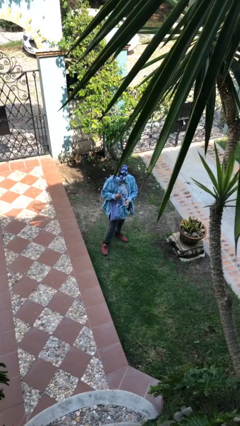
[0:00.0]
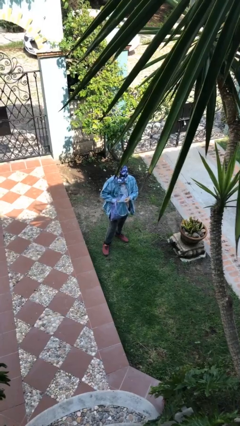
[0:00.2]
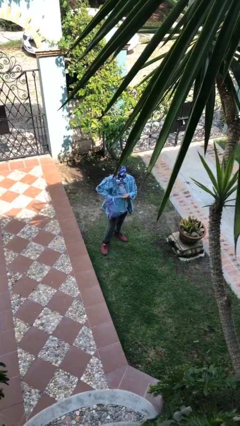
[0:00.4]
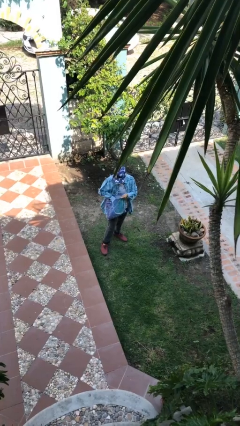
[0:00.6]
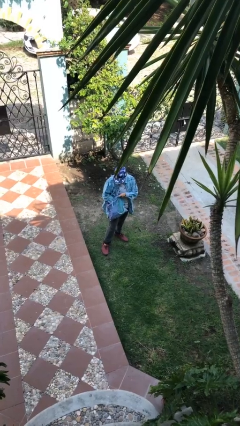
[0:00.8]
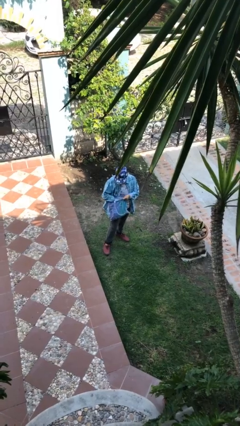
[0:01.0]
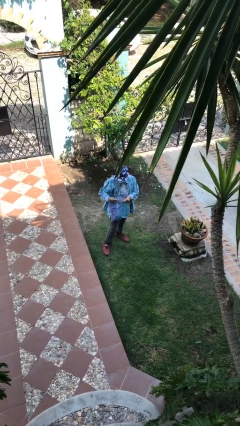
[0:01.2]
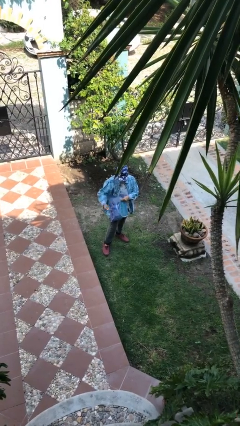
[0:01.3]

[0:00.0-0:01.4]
person puts object into purse

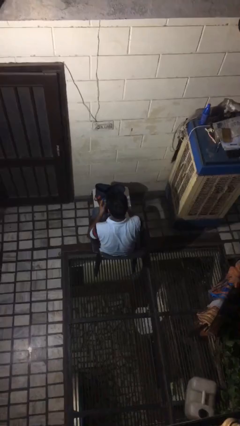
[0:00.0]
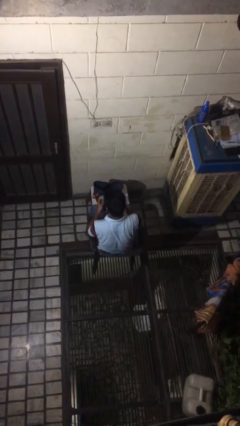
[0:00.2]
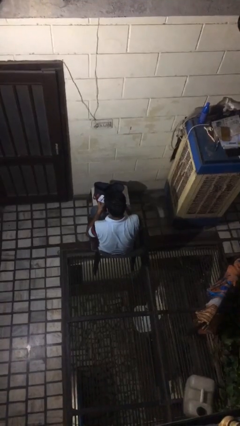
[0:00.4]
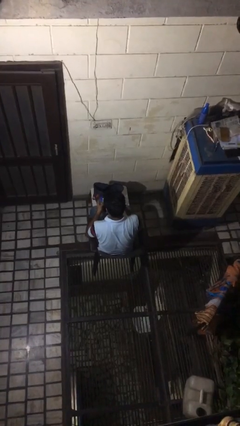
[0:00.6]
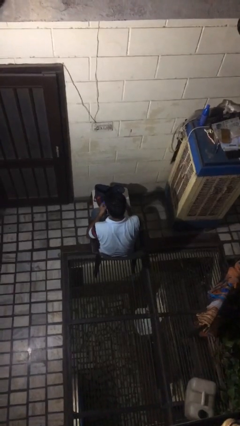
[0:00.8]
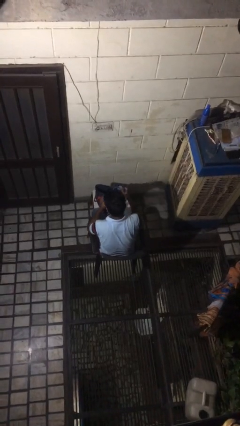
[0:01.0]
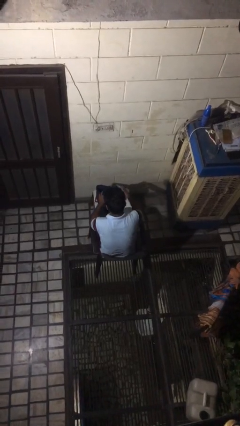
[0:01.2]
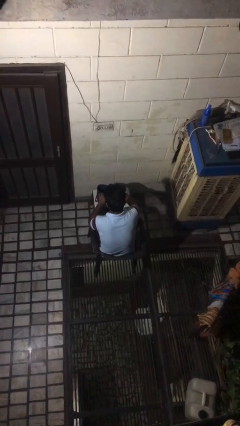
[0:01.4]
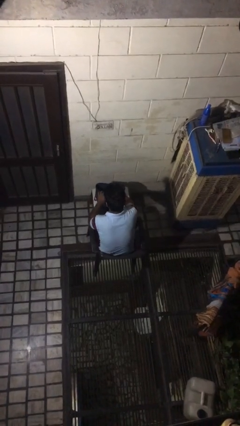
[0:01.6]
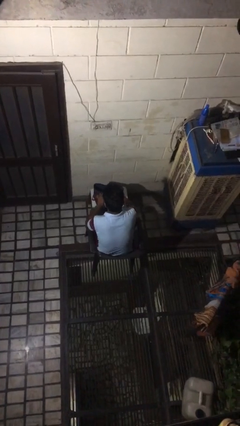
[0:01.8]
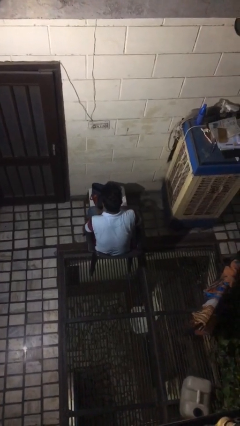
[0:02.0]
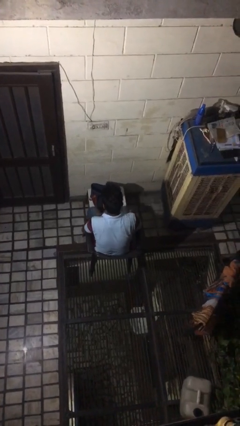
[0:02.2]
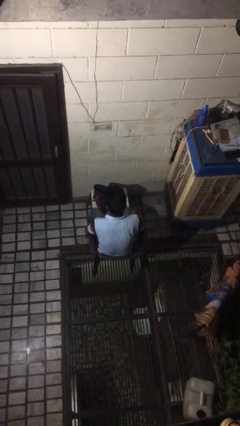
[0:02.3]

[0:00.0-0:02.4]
person puts object into bag

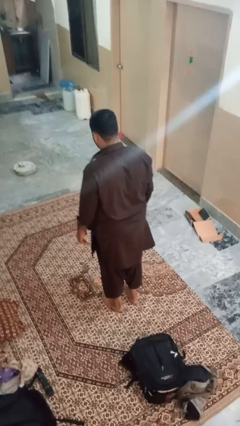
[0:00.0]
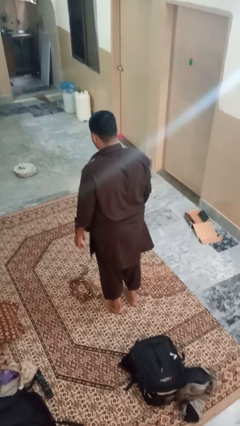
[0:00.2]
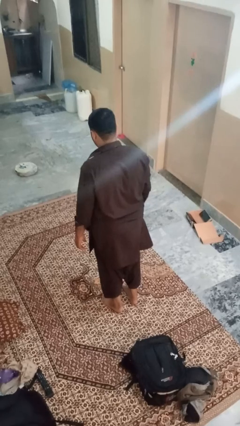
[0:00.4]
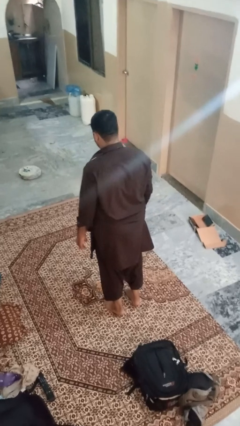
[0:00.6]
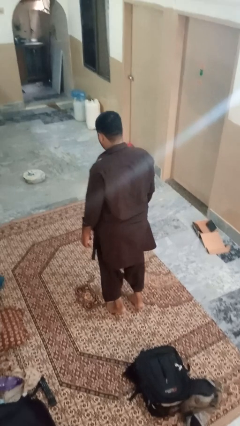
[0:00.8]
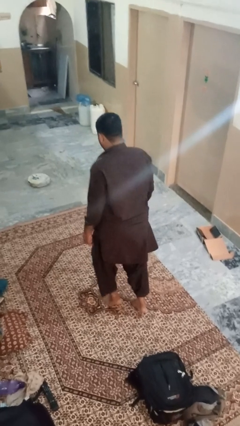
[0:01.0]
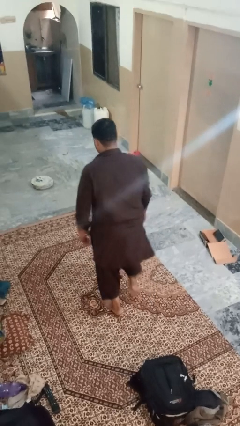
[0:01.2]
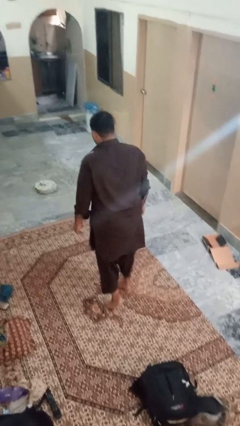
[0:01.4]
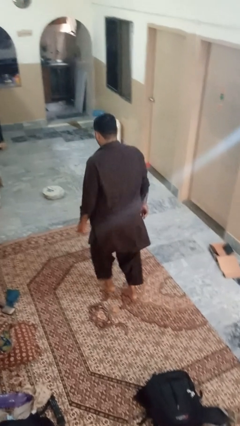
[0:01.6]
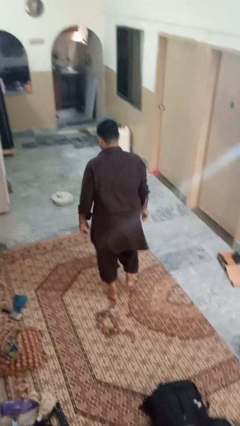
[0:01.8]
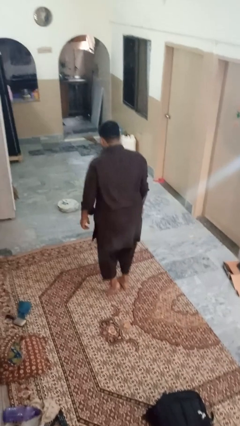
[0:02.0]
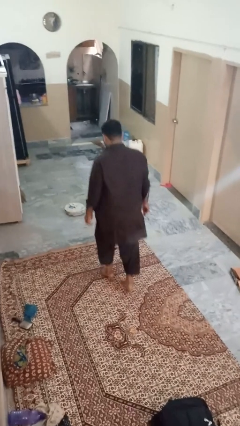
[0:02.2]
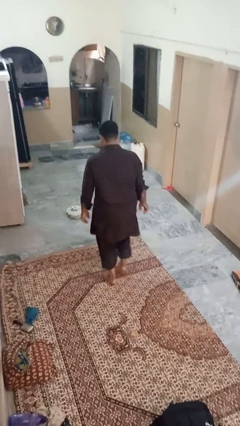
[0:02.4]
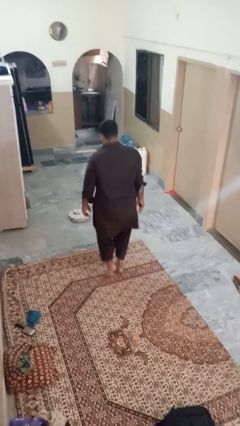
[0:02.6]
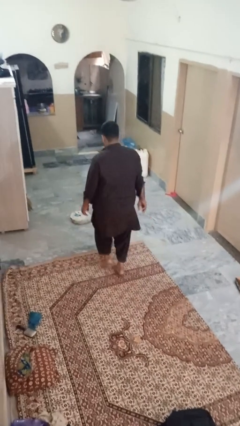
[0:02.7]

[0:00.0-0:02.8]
person walks tiptoe

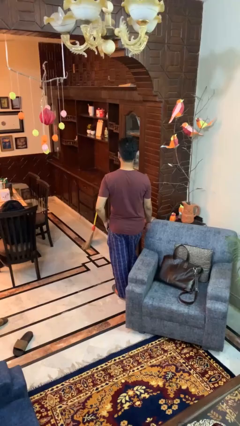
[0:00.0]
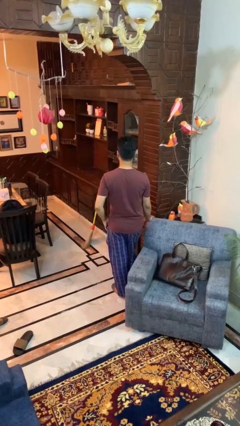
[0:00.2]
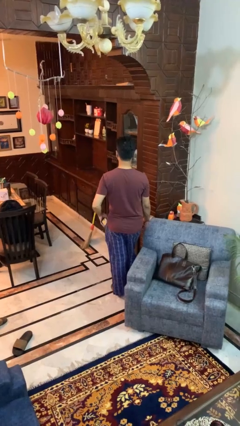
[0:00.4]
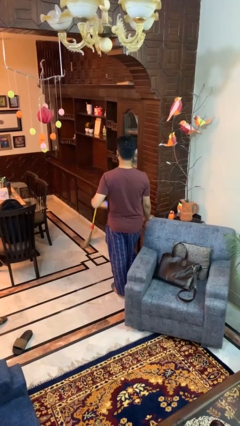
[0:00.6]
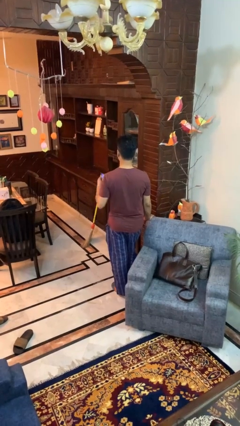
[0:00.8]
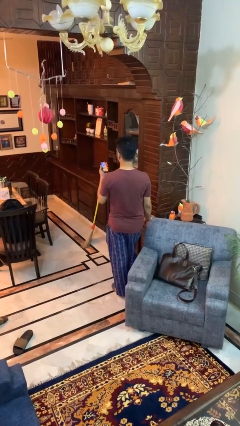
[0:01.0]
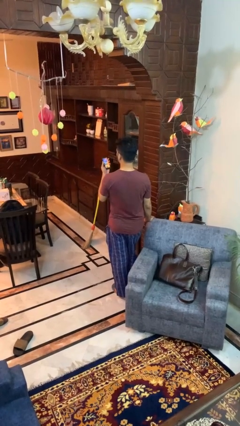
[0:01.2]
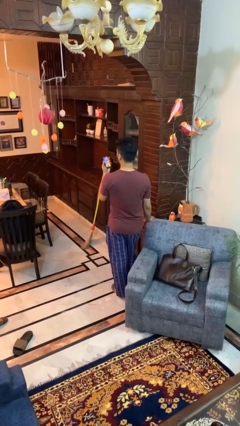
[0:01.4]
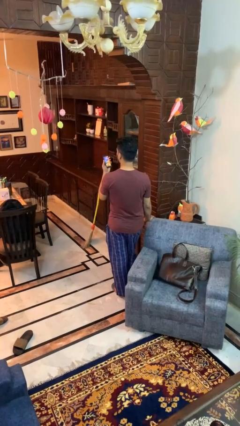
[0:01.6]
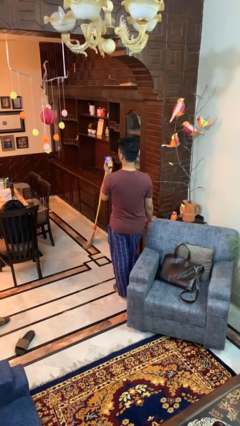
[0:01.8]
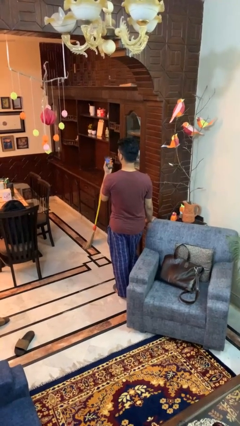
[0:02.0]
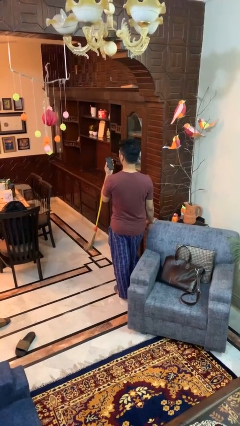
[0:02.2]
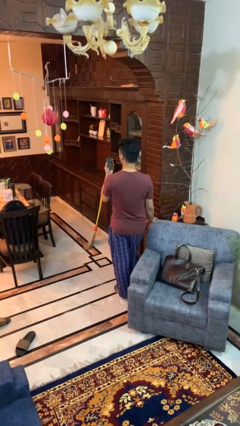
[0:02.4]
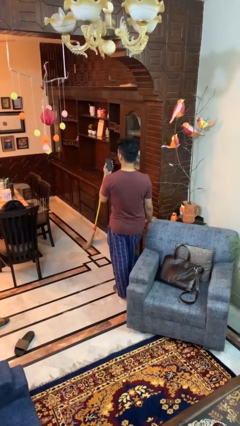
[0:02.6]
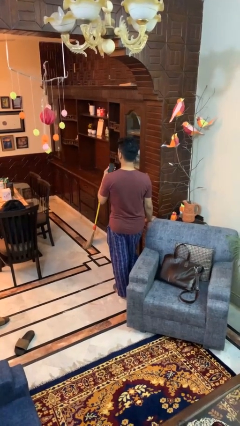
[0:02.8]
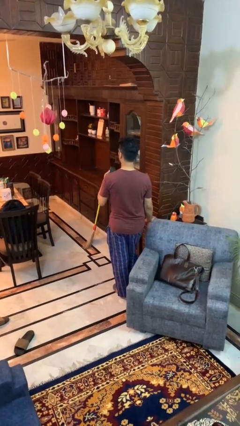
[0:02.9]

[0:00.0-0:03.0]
person takes phone from pocket

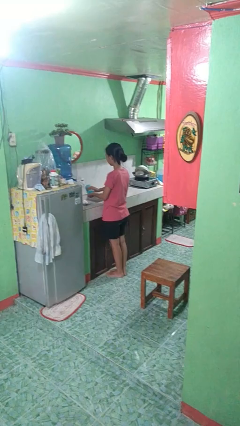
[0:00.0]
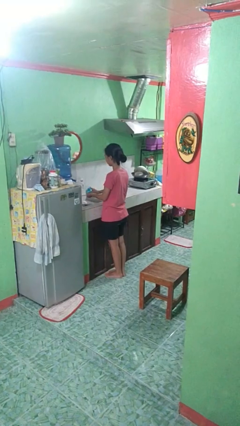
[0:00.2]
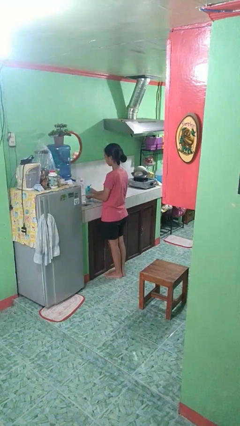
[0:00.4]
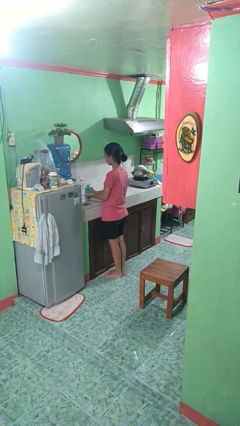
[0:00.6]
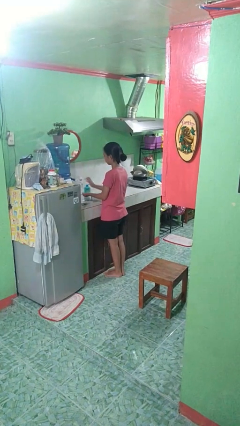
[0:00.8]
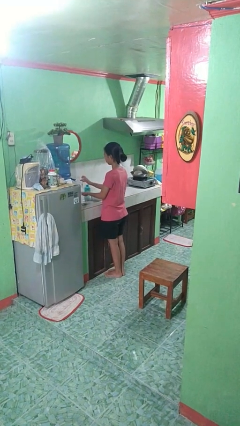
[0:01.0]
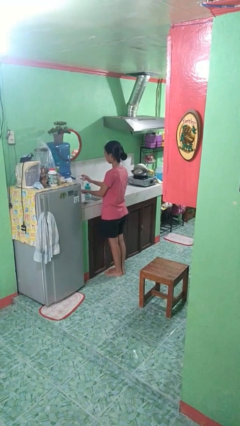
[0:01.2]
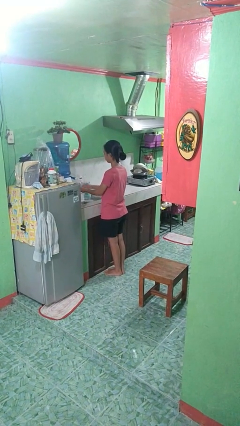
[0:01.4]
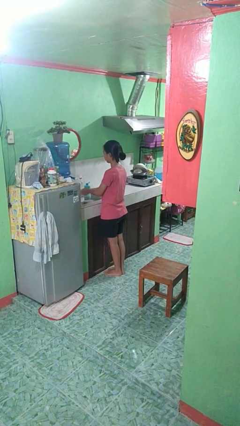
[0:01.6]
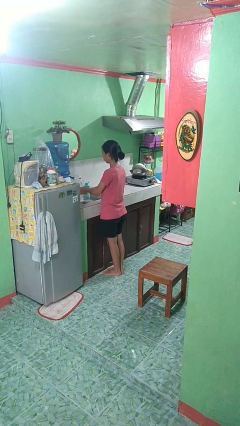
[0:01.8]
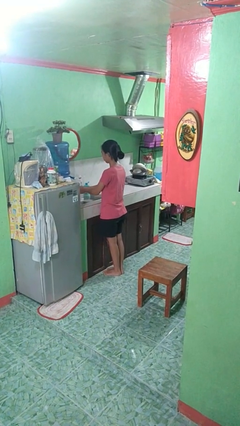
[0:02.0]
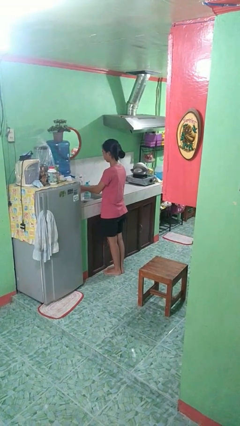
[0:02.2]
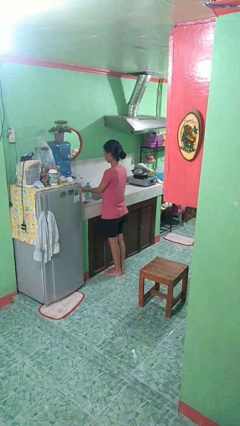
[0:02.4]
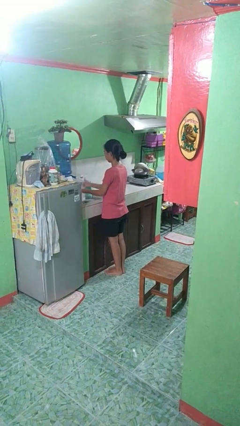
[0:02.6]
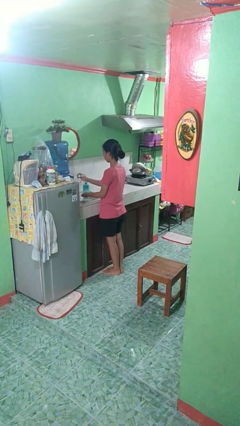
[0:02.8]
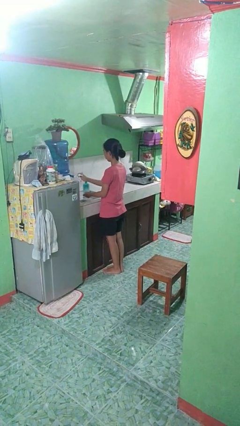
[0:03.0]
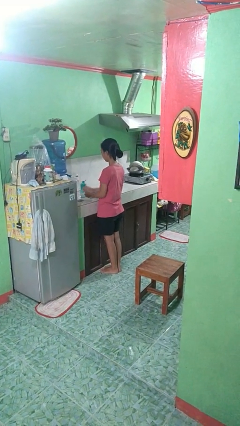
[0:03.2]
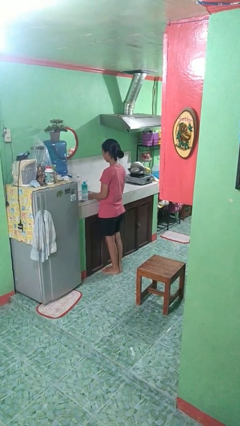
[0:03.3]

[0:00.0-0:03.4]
person washes hands

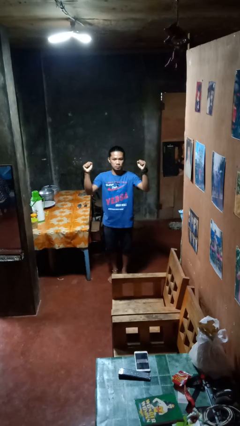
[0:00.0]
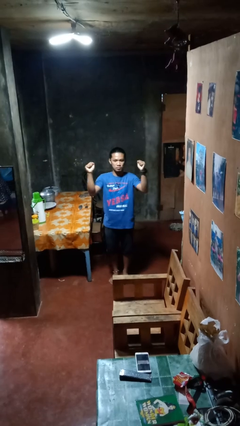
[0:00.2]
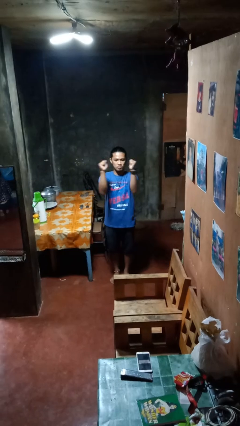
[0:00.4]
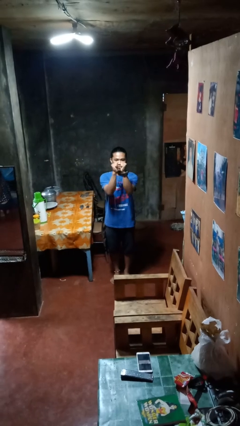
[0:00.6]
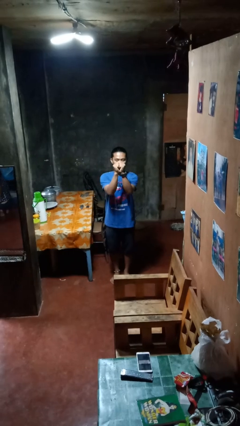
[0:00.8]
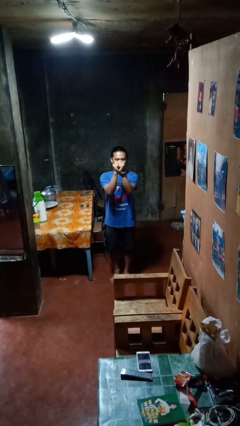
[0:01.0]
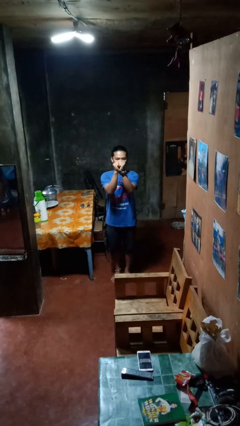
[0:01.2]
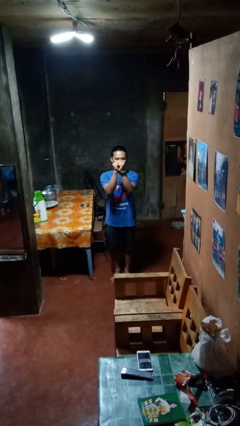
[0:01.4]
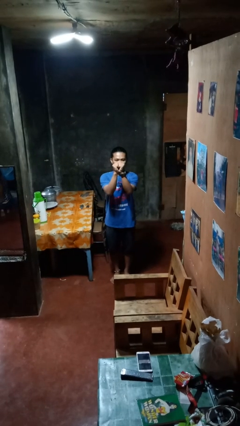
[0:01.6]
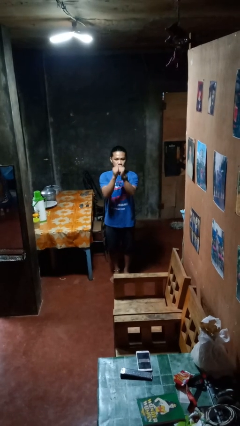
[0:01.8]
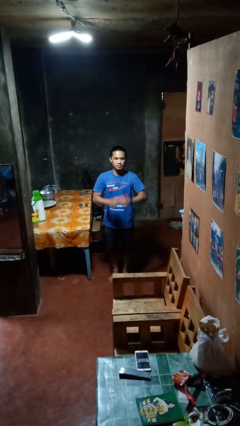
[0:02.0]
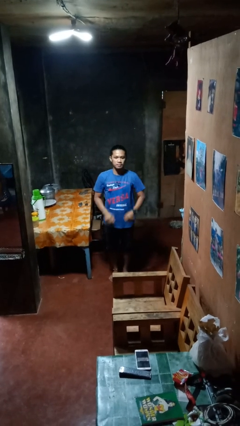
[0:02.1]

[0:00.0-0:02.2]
person gestures zoom out

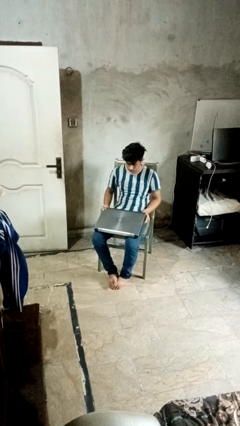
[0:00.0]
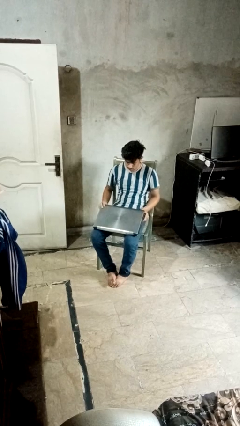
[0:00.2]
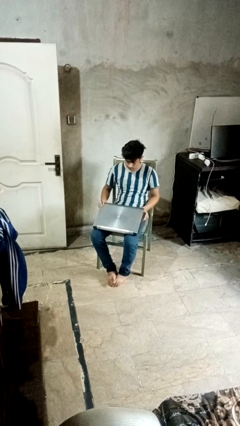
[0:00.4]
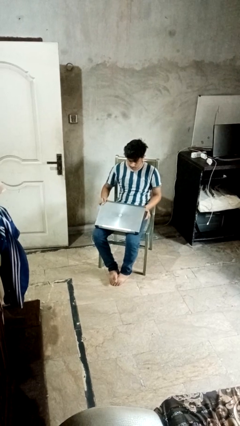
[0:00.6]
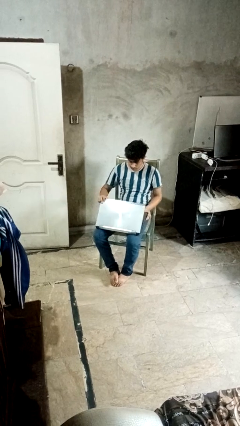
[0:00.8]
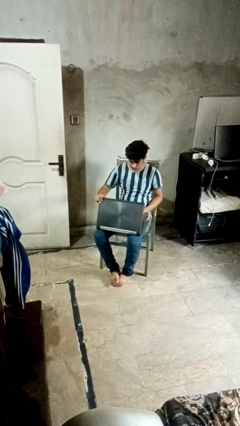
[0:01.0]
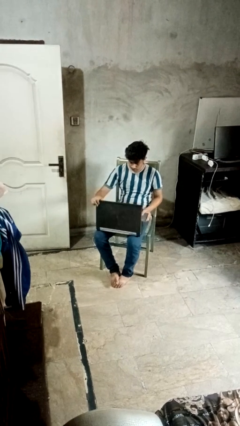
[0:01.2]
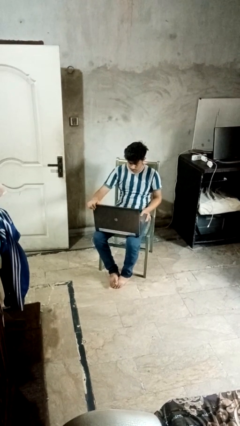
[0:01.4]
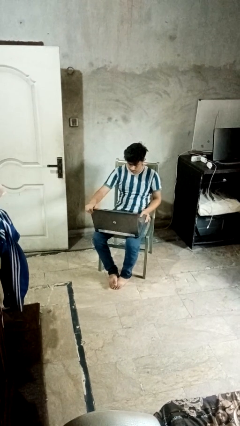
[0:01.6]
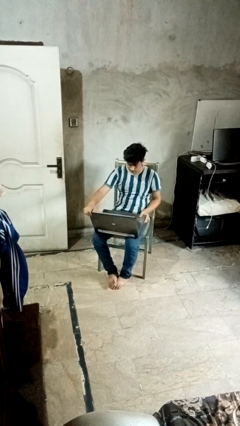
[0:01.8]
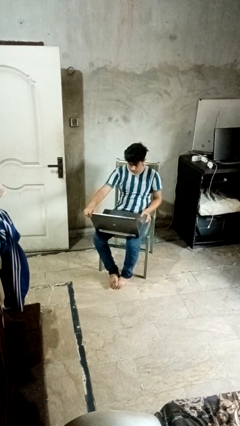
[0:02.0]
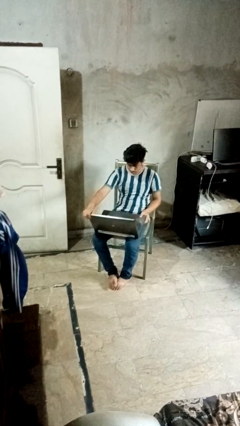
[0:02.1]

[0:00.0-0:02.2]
person opens laptop
